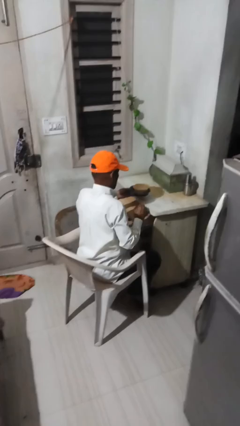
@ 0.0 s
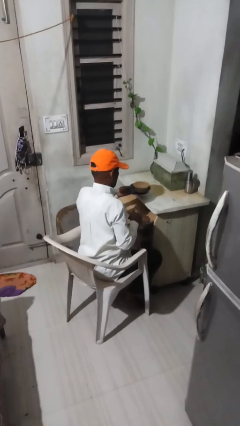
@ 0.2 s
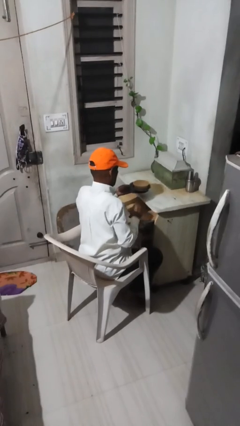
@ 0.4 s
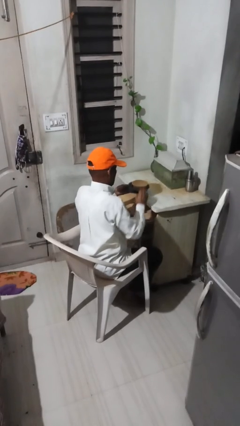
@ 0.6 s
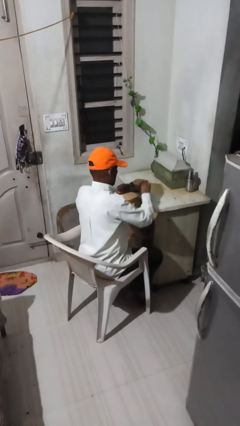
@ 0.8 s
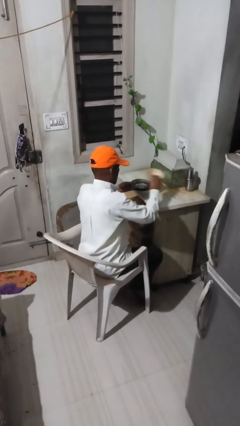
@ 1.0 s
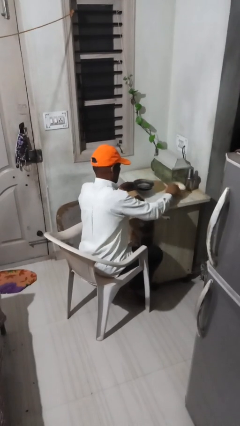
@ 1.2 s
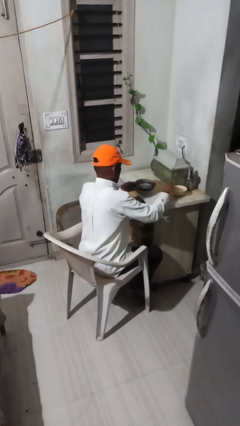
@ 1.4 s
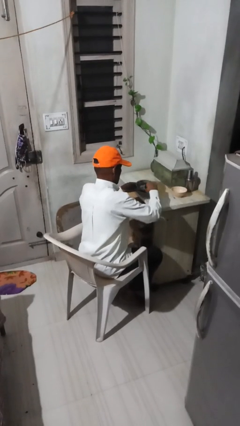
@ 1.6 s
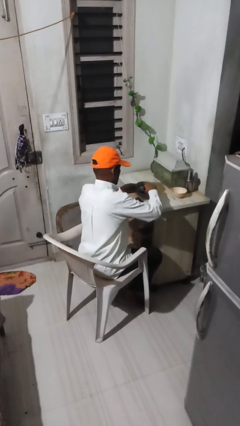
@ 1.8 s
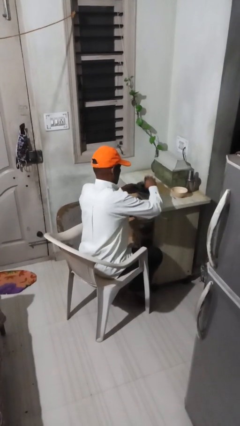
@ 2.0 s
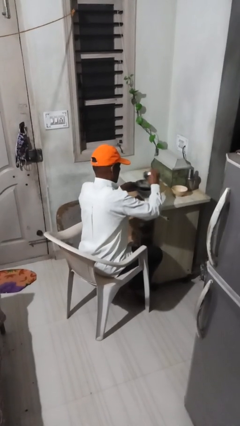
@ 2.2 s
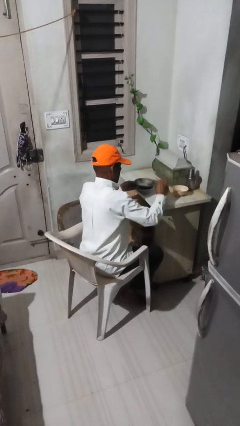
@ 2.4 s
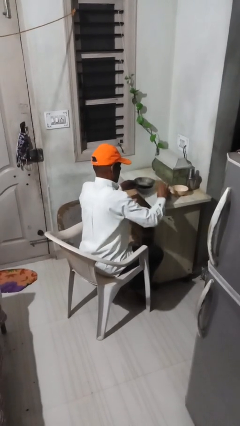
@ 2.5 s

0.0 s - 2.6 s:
person sets table

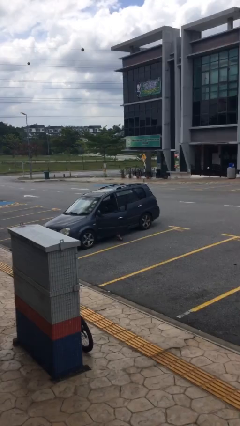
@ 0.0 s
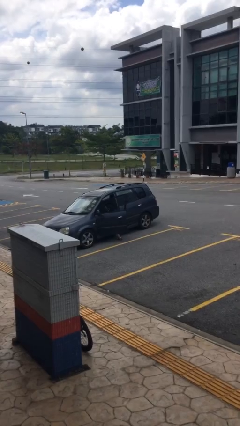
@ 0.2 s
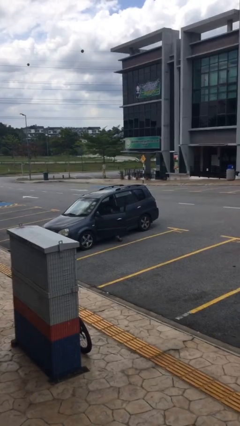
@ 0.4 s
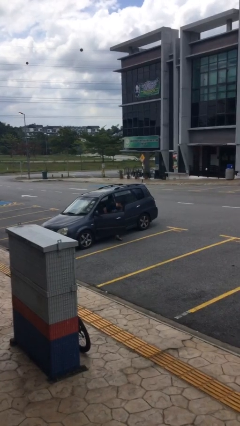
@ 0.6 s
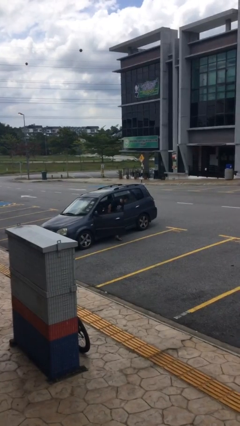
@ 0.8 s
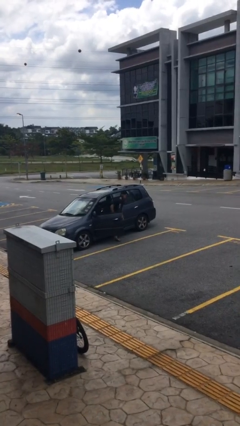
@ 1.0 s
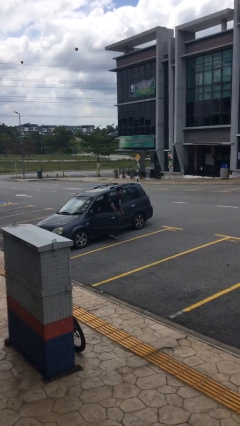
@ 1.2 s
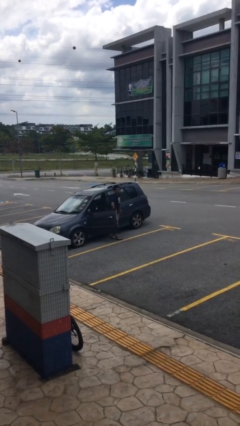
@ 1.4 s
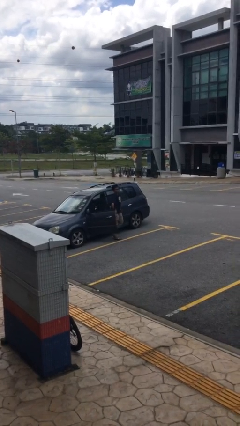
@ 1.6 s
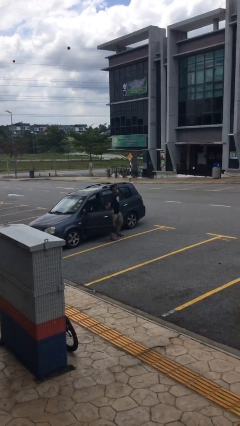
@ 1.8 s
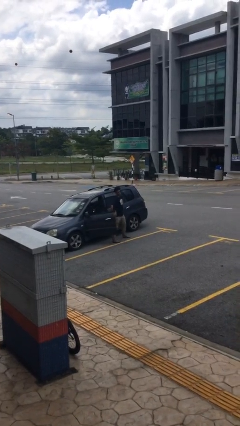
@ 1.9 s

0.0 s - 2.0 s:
person exits car

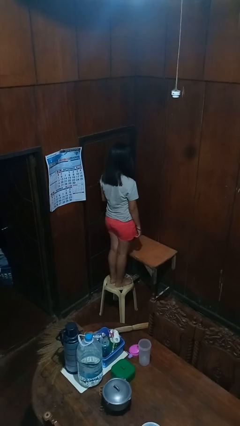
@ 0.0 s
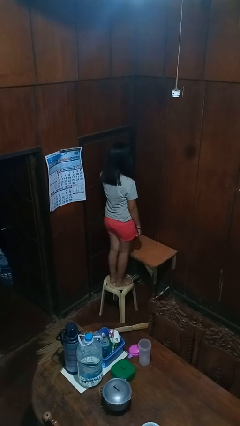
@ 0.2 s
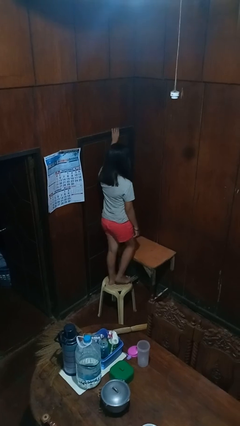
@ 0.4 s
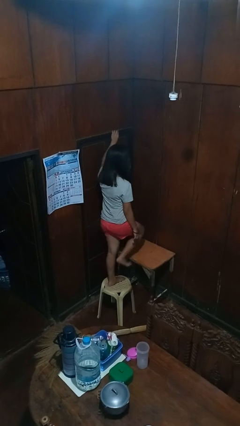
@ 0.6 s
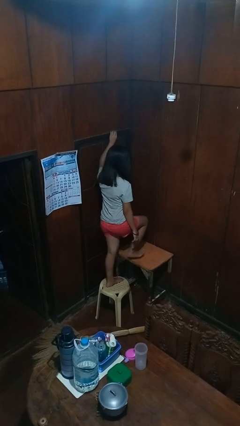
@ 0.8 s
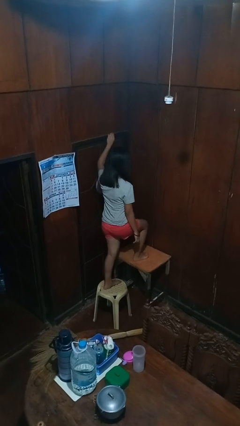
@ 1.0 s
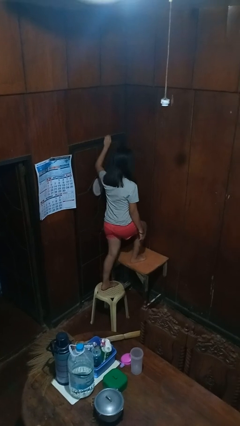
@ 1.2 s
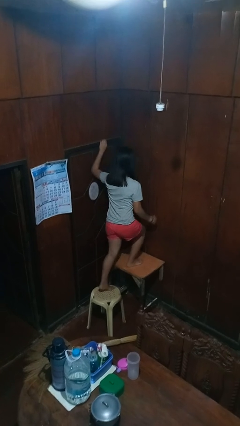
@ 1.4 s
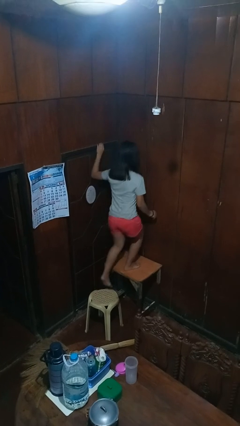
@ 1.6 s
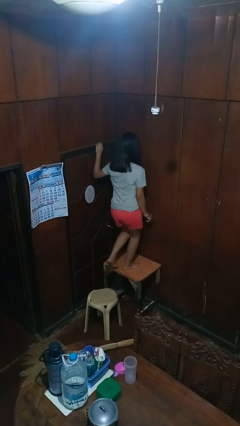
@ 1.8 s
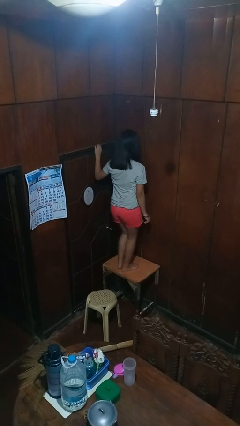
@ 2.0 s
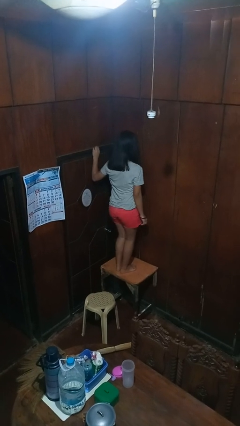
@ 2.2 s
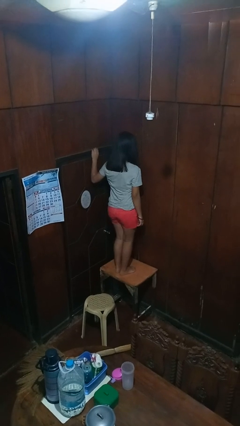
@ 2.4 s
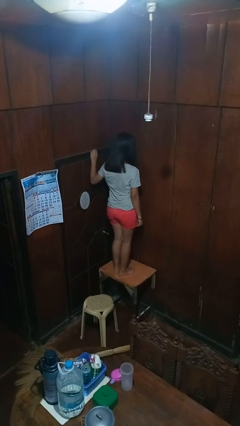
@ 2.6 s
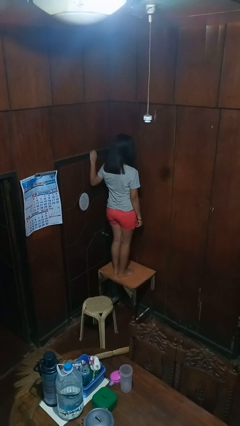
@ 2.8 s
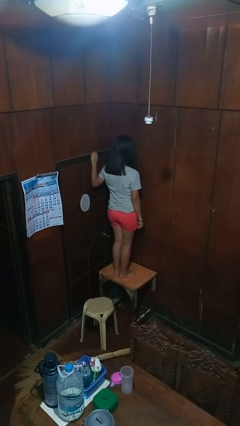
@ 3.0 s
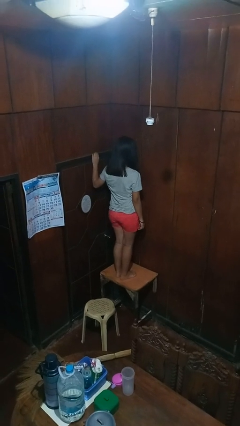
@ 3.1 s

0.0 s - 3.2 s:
person climbs on table

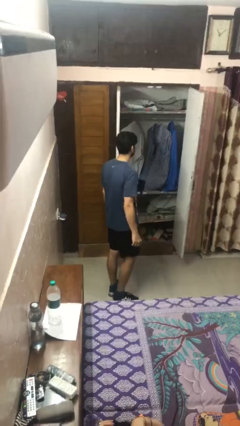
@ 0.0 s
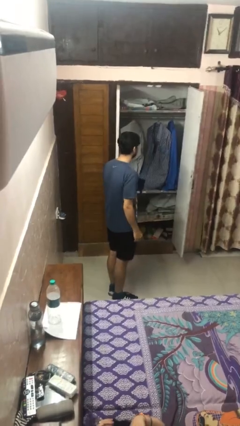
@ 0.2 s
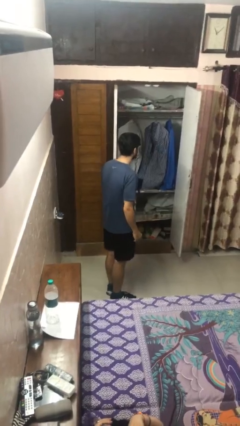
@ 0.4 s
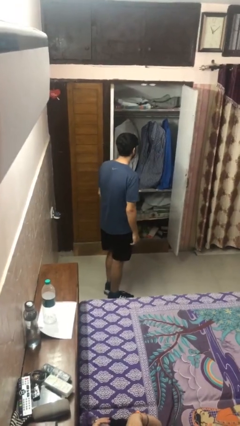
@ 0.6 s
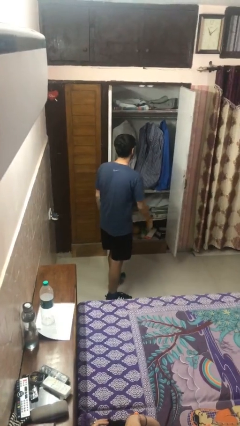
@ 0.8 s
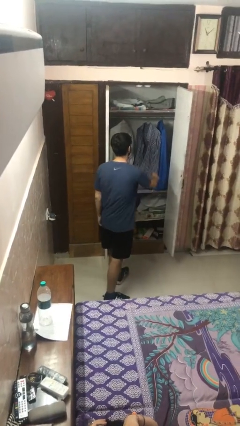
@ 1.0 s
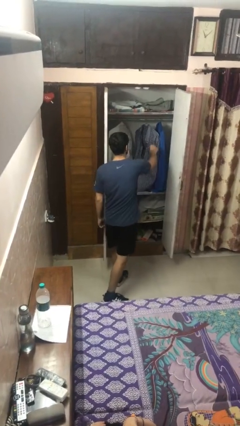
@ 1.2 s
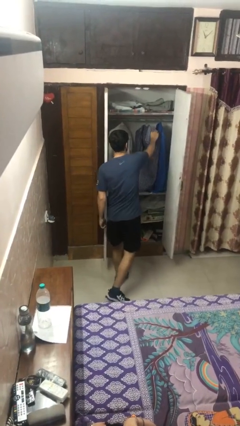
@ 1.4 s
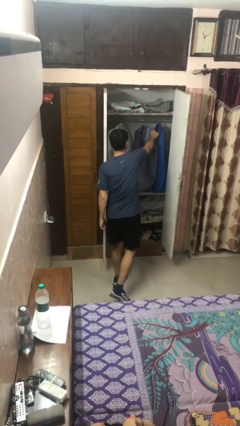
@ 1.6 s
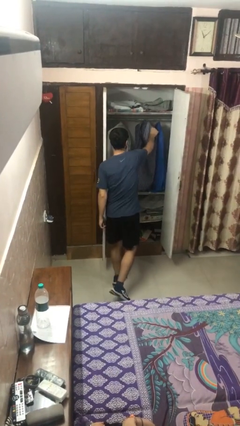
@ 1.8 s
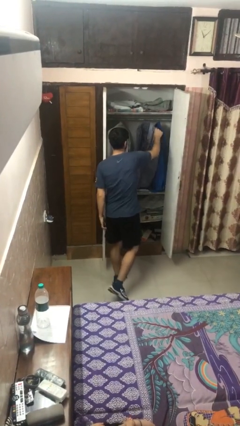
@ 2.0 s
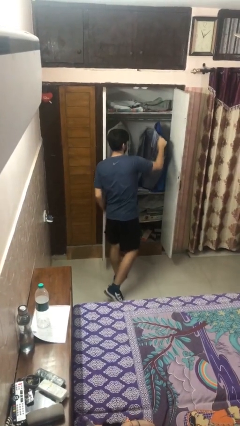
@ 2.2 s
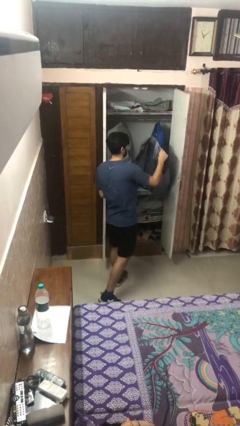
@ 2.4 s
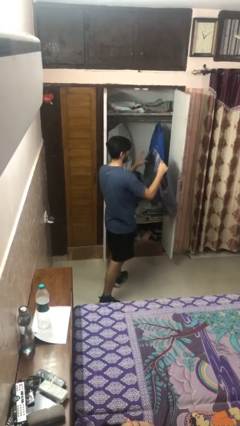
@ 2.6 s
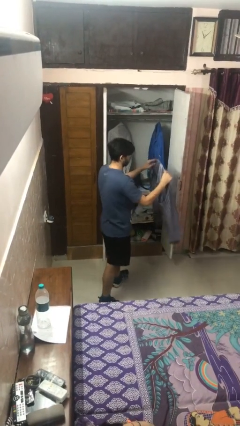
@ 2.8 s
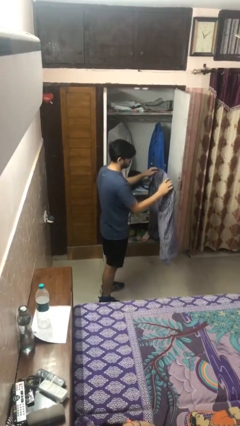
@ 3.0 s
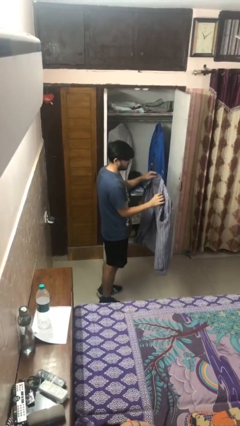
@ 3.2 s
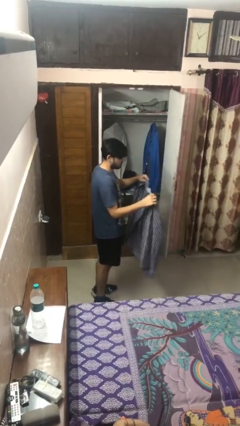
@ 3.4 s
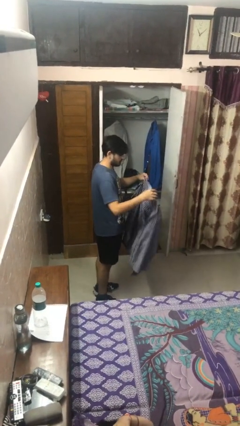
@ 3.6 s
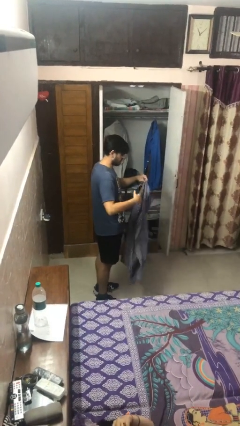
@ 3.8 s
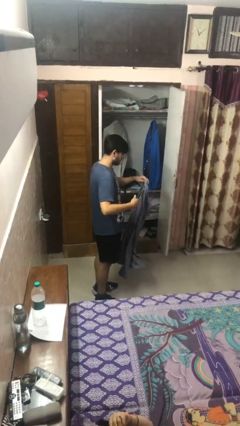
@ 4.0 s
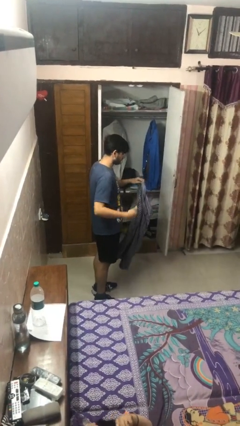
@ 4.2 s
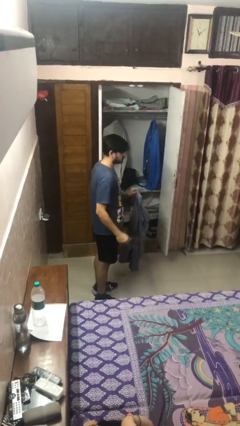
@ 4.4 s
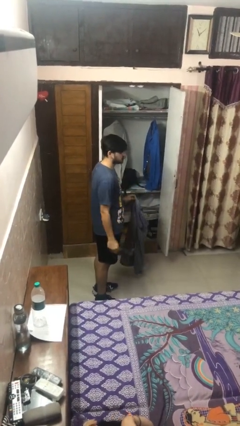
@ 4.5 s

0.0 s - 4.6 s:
person takes clothes from closet

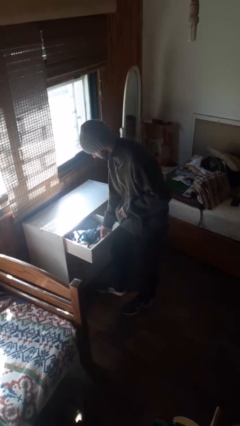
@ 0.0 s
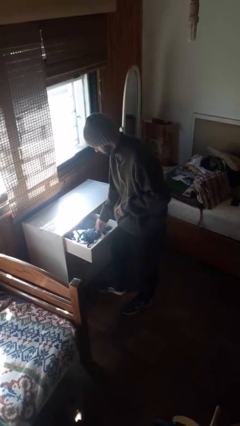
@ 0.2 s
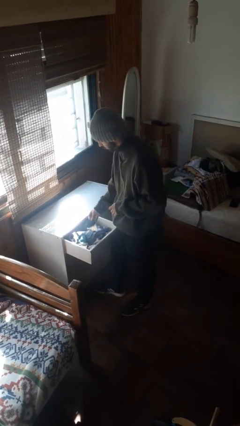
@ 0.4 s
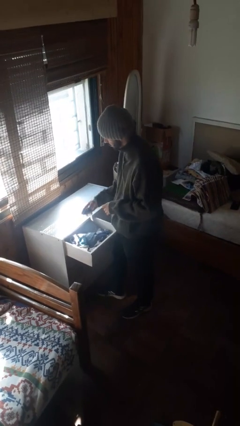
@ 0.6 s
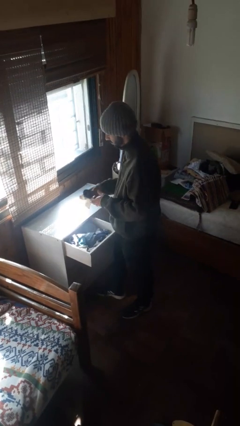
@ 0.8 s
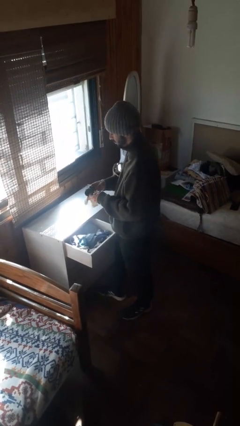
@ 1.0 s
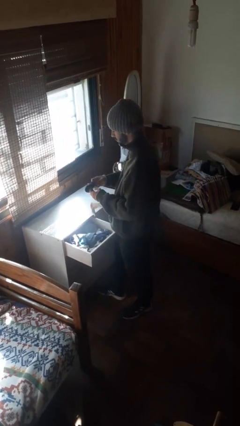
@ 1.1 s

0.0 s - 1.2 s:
person takes clothes from dresser

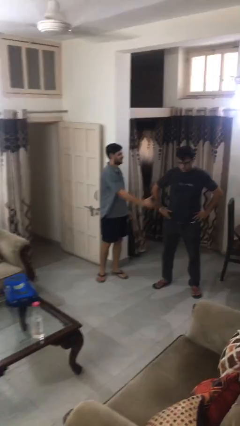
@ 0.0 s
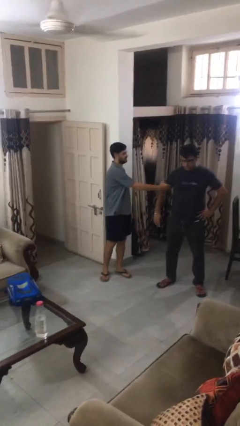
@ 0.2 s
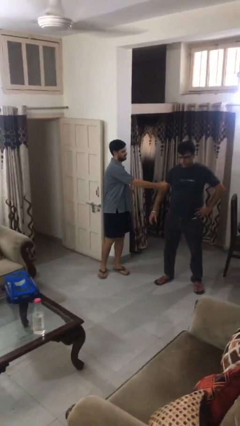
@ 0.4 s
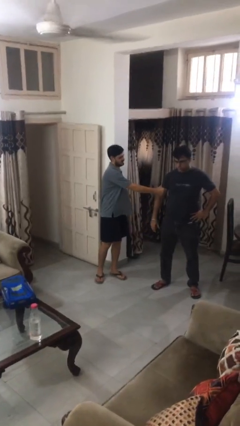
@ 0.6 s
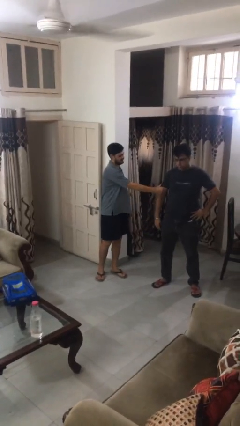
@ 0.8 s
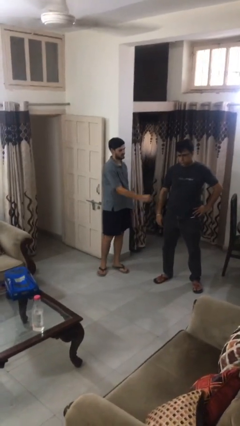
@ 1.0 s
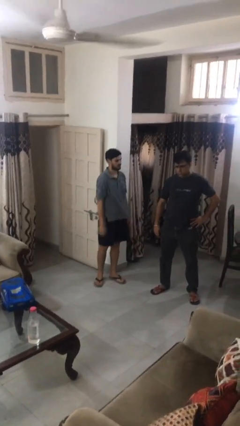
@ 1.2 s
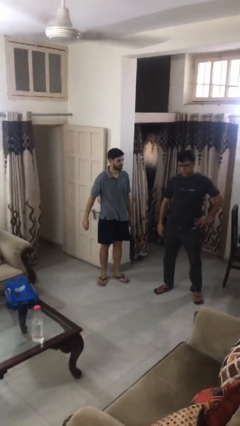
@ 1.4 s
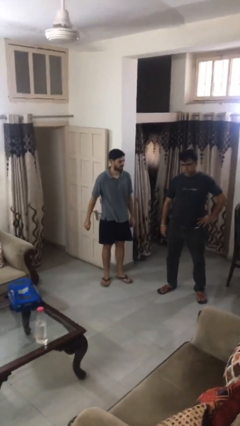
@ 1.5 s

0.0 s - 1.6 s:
person grabs person by bicep

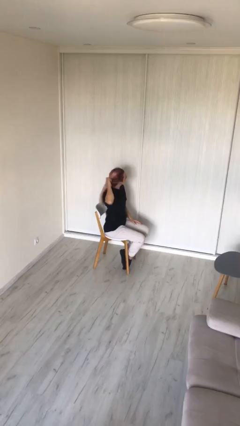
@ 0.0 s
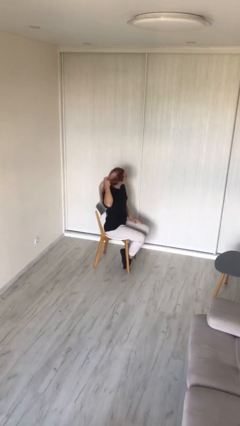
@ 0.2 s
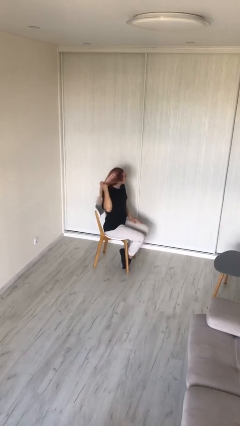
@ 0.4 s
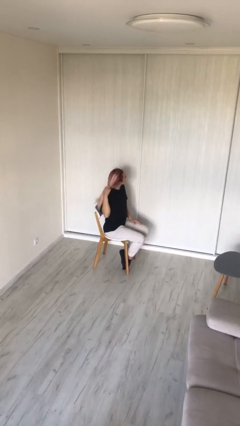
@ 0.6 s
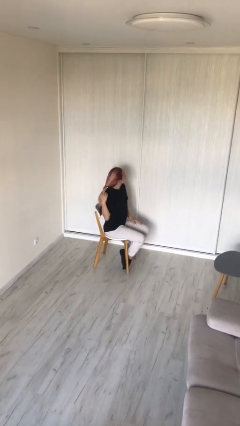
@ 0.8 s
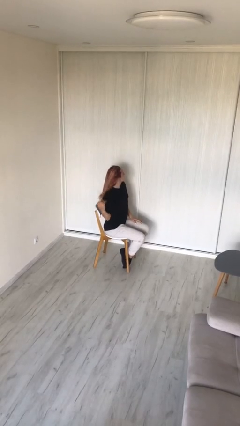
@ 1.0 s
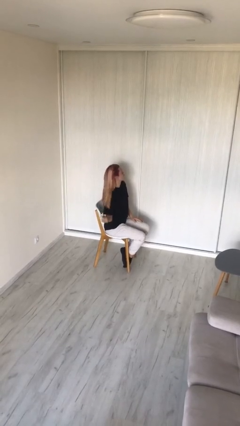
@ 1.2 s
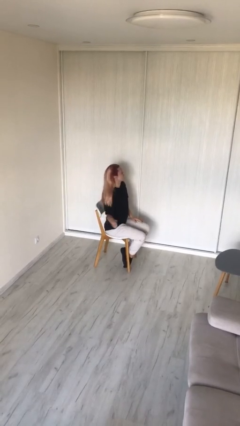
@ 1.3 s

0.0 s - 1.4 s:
person takes off hairtie
